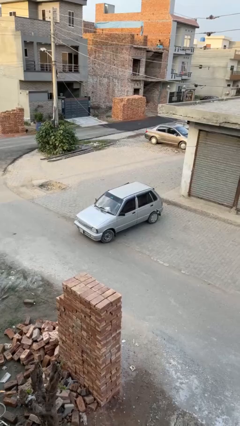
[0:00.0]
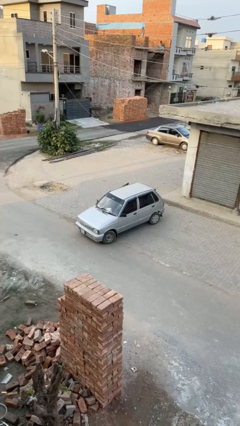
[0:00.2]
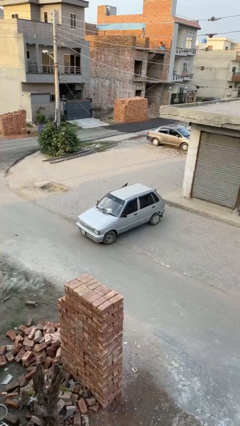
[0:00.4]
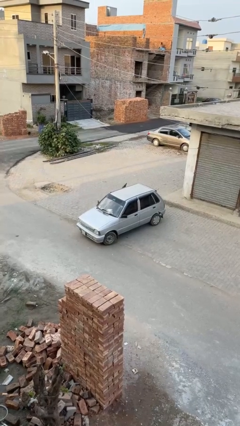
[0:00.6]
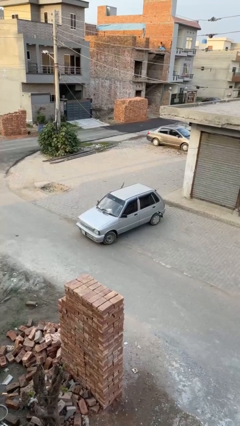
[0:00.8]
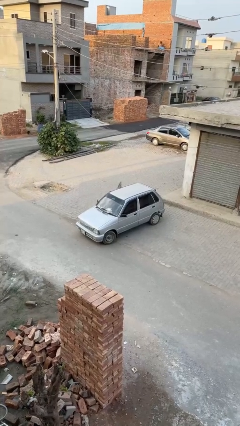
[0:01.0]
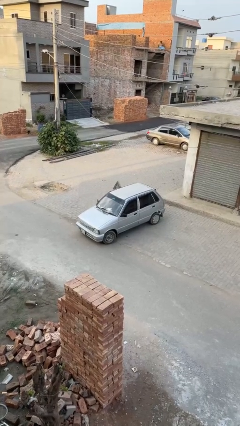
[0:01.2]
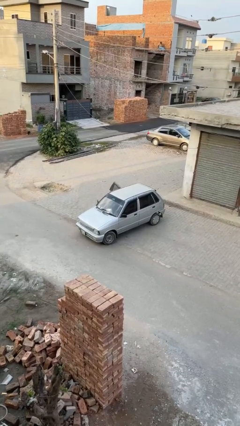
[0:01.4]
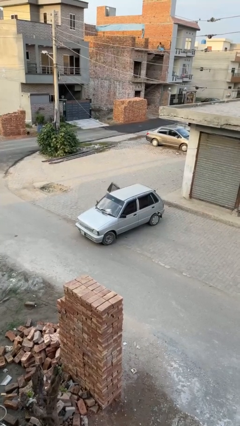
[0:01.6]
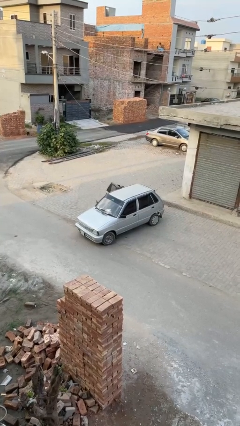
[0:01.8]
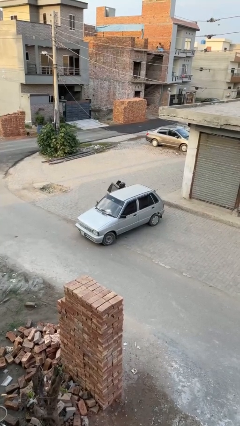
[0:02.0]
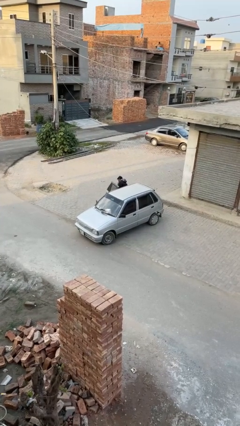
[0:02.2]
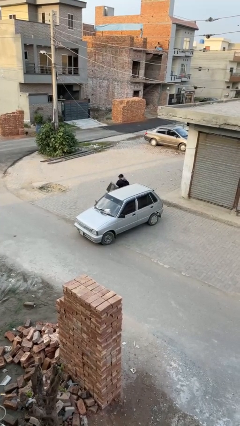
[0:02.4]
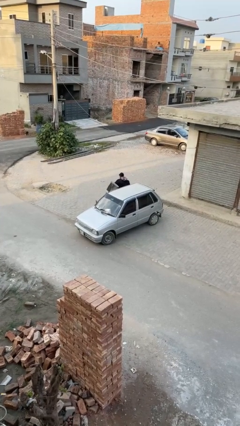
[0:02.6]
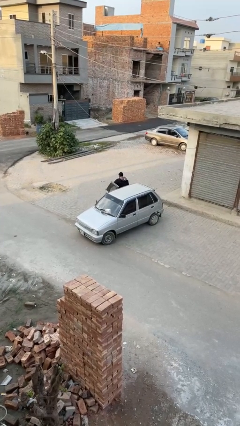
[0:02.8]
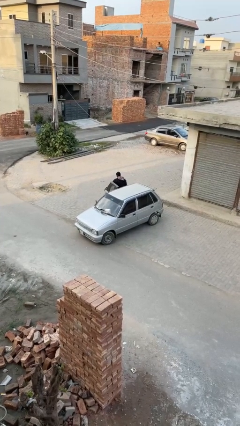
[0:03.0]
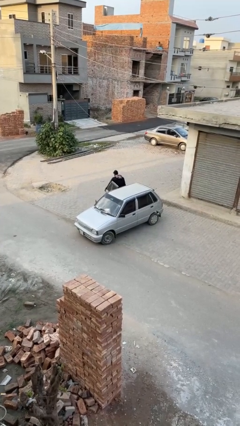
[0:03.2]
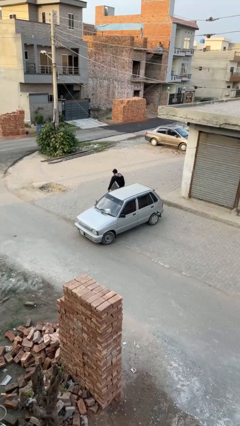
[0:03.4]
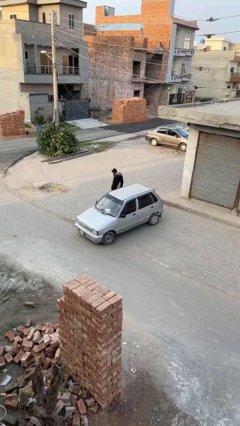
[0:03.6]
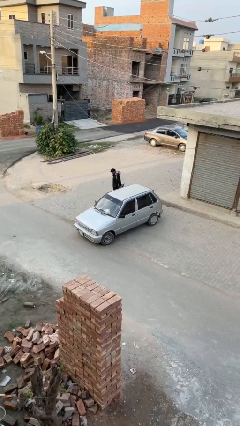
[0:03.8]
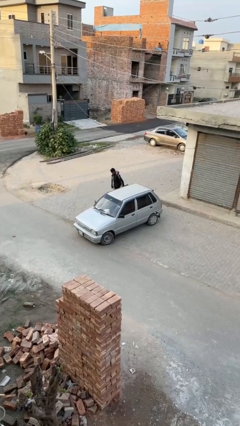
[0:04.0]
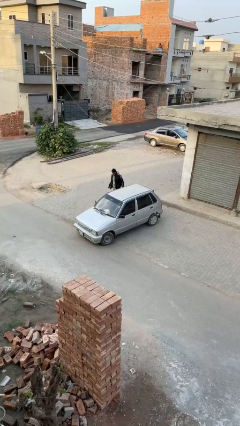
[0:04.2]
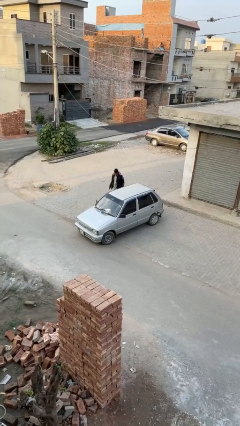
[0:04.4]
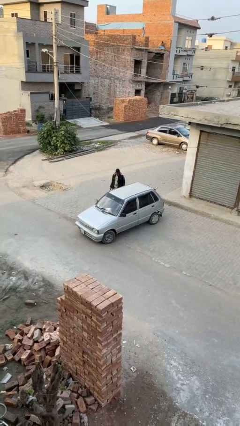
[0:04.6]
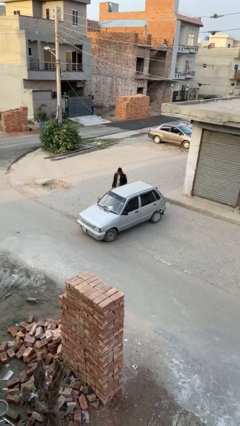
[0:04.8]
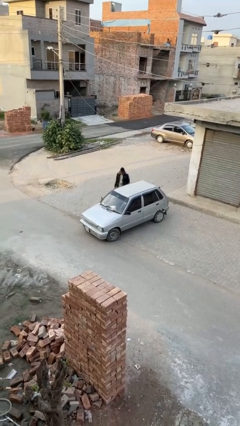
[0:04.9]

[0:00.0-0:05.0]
car drops off person

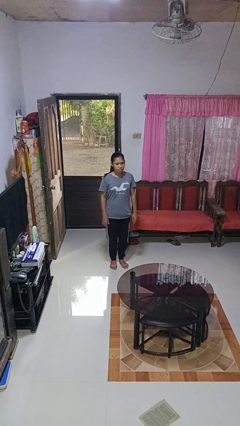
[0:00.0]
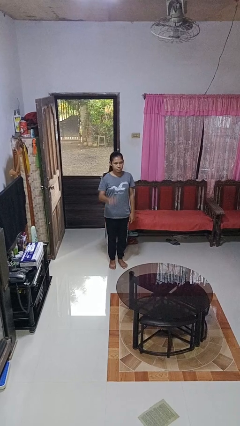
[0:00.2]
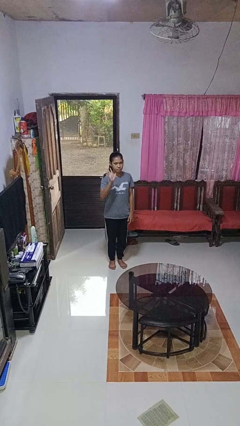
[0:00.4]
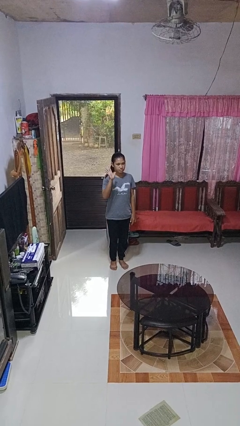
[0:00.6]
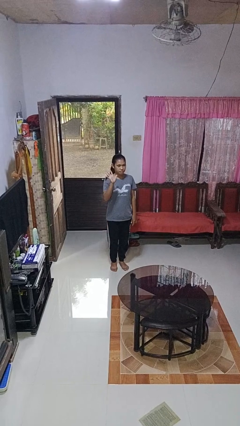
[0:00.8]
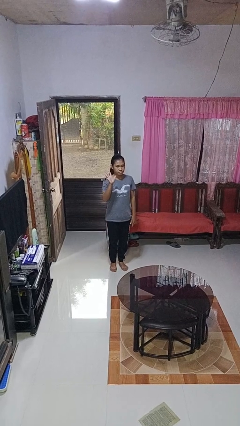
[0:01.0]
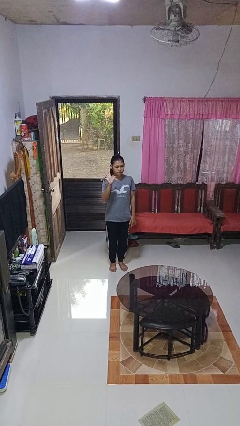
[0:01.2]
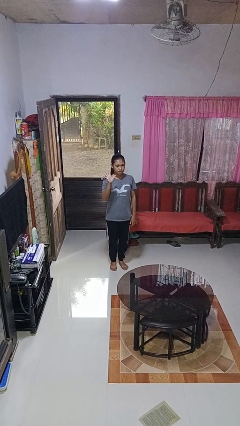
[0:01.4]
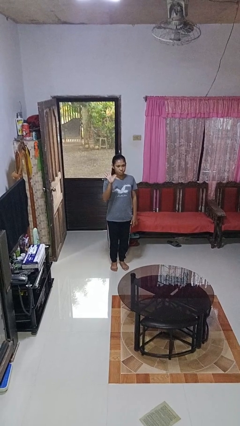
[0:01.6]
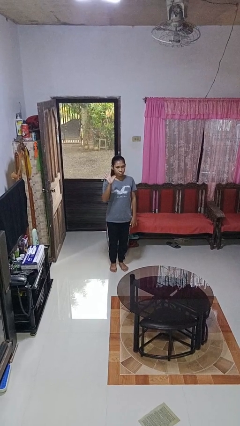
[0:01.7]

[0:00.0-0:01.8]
person gestures number five

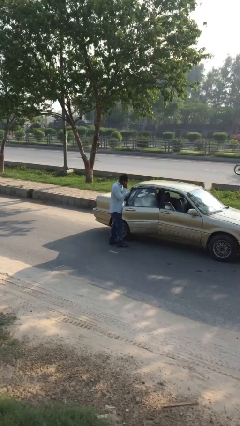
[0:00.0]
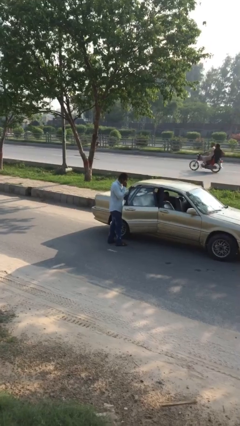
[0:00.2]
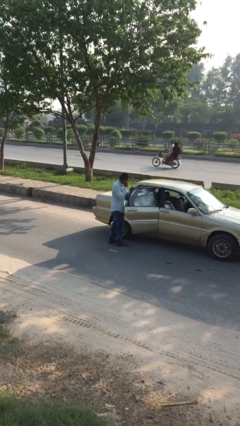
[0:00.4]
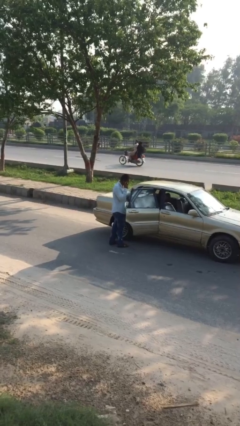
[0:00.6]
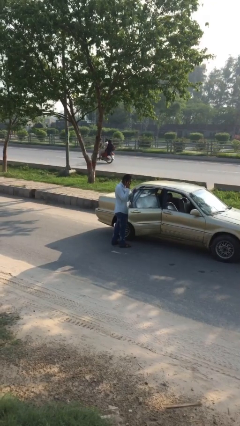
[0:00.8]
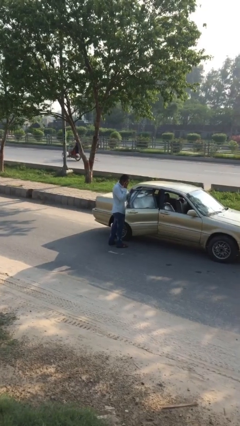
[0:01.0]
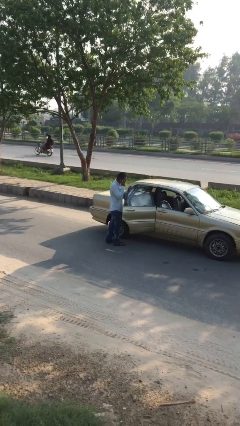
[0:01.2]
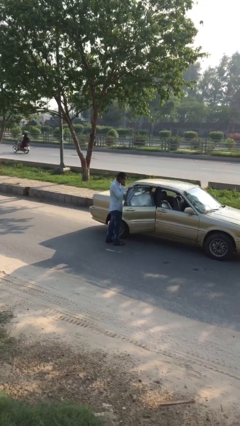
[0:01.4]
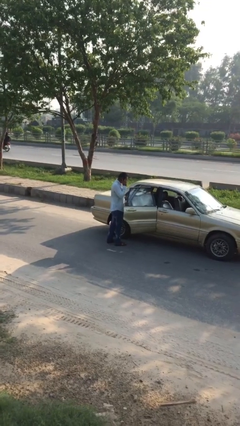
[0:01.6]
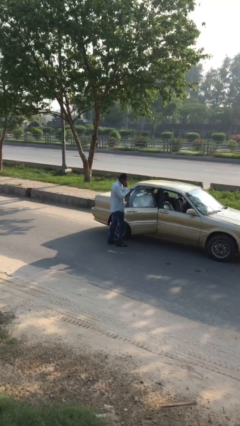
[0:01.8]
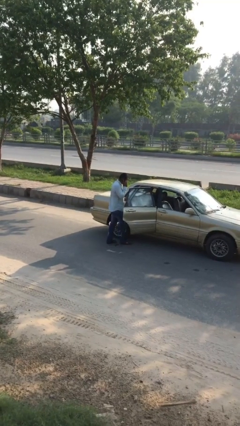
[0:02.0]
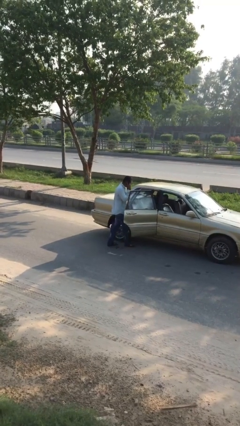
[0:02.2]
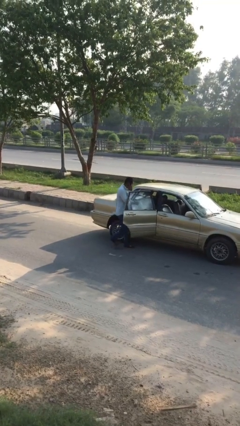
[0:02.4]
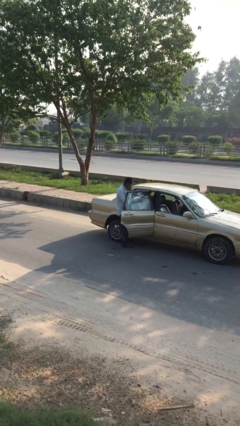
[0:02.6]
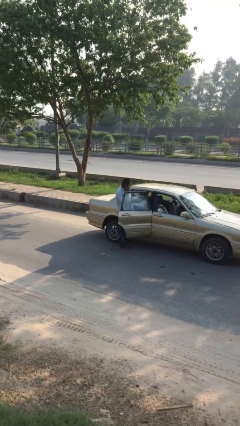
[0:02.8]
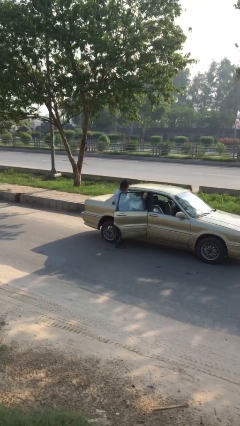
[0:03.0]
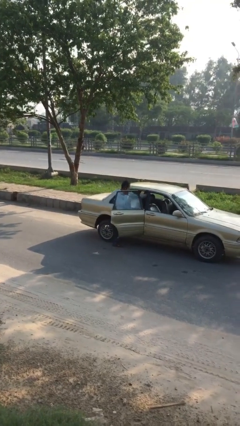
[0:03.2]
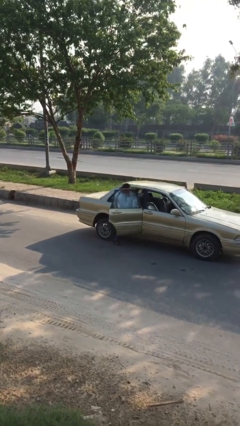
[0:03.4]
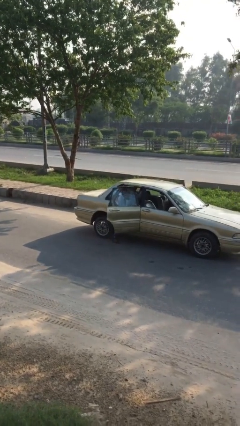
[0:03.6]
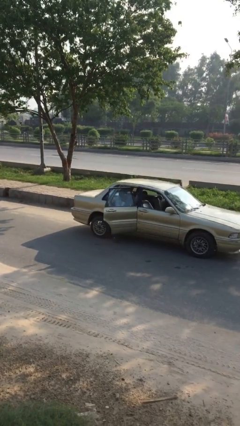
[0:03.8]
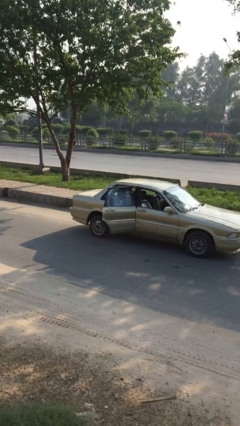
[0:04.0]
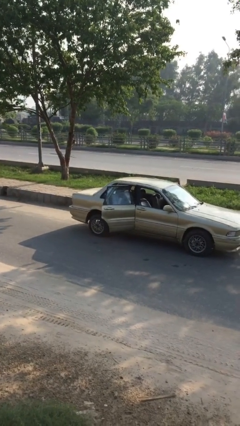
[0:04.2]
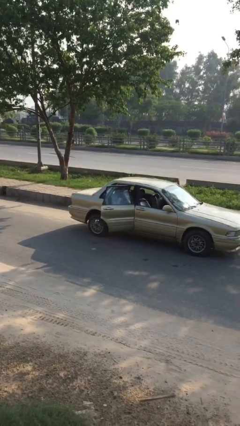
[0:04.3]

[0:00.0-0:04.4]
person enters car

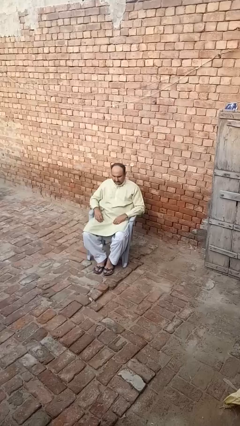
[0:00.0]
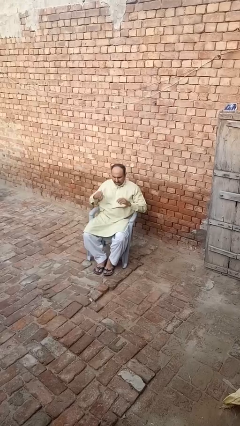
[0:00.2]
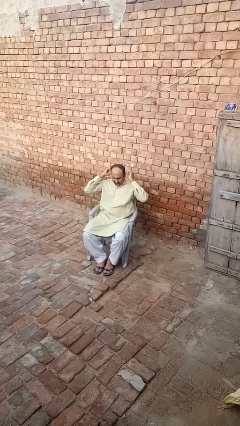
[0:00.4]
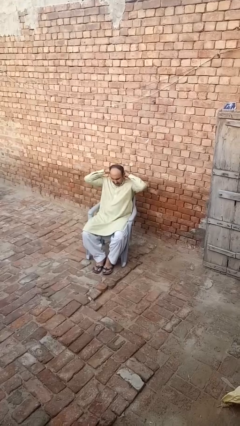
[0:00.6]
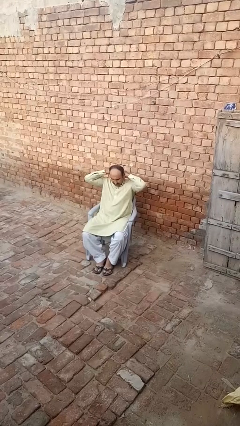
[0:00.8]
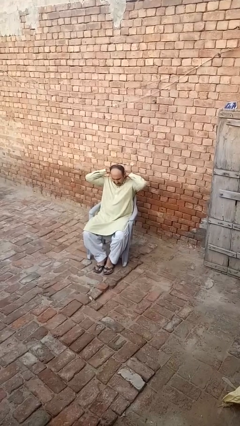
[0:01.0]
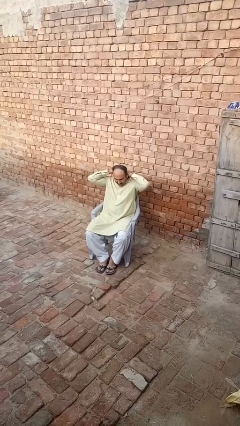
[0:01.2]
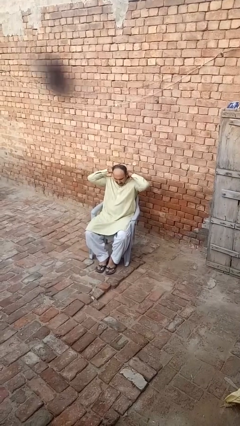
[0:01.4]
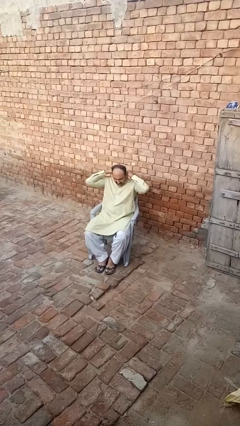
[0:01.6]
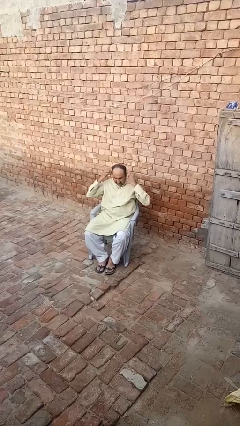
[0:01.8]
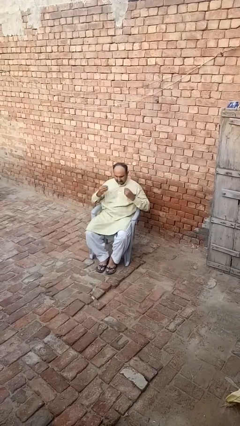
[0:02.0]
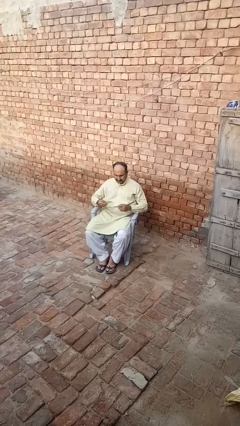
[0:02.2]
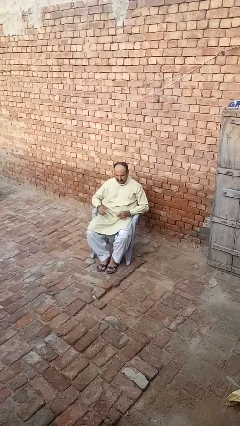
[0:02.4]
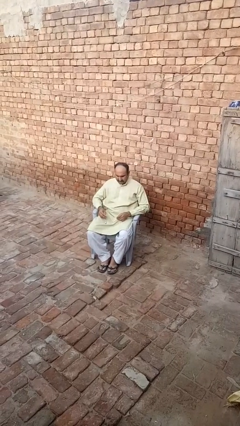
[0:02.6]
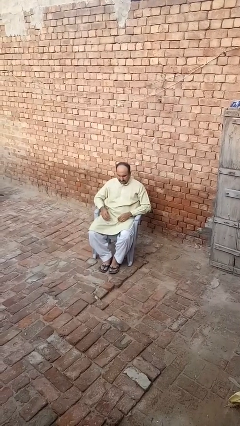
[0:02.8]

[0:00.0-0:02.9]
person takes off necklace

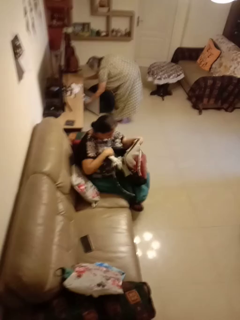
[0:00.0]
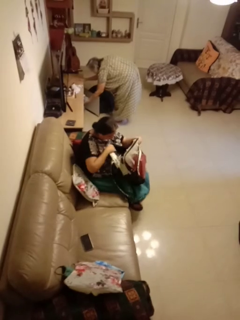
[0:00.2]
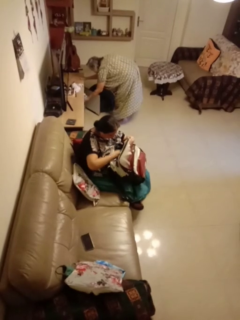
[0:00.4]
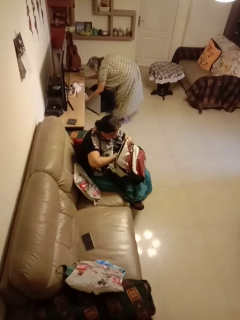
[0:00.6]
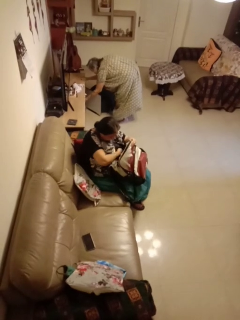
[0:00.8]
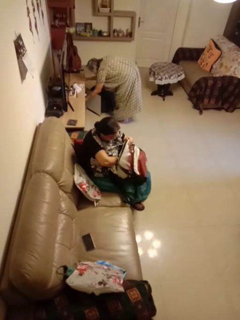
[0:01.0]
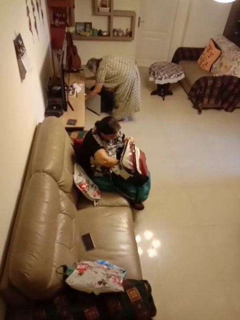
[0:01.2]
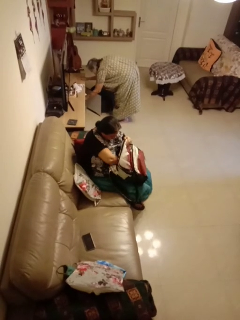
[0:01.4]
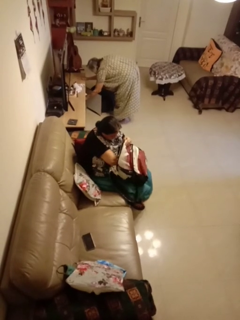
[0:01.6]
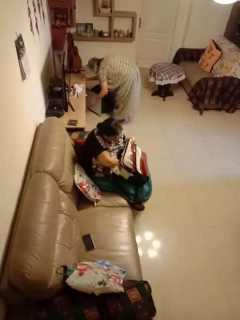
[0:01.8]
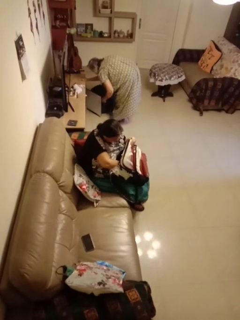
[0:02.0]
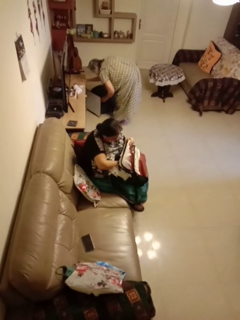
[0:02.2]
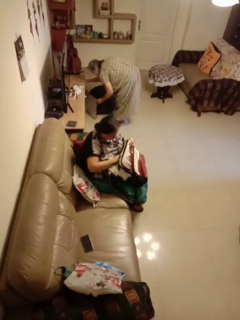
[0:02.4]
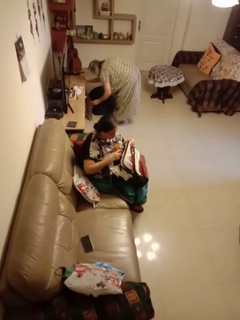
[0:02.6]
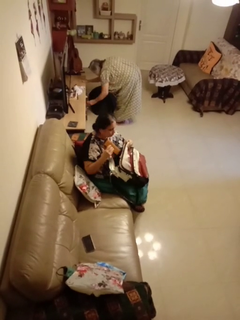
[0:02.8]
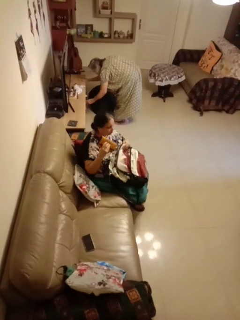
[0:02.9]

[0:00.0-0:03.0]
person searches in backpack

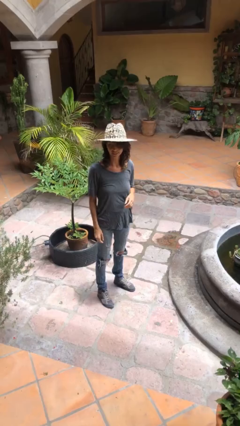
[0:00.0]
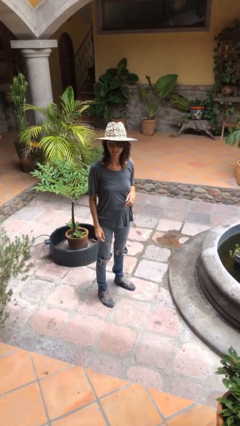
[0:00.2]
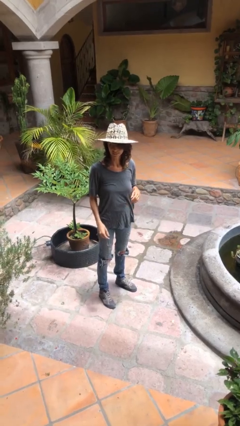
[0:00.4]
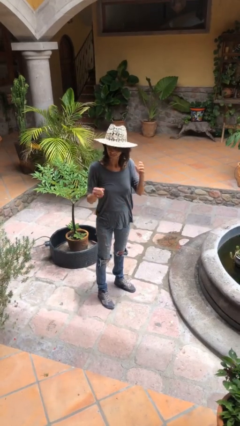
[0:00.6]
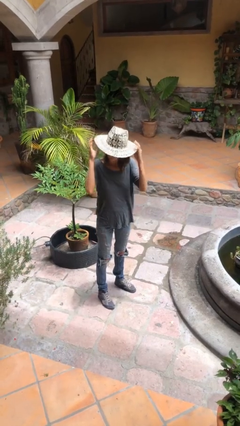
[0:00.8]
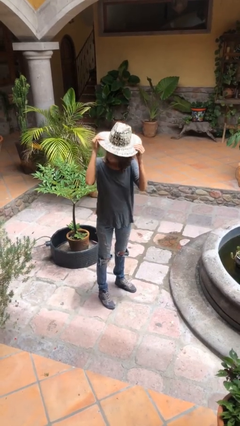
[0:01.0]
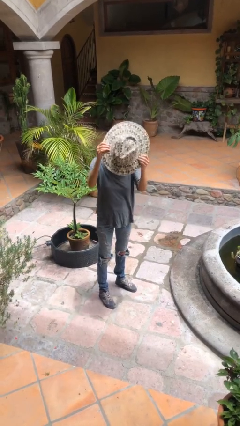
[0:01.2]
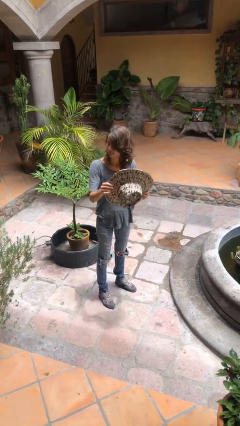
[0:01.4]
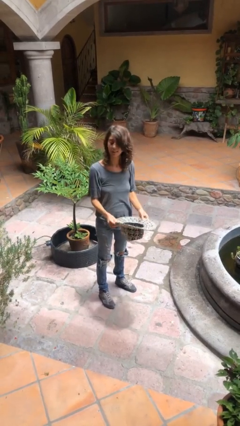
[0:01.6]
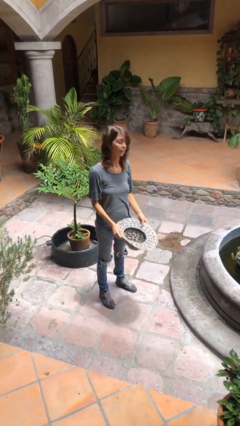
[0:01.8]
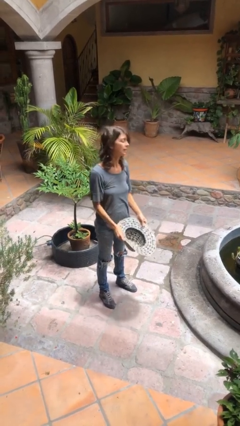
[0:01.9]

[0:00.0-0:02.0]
person takes off hat
